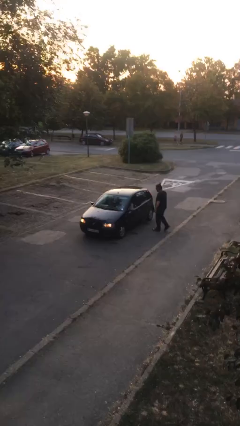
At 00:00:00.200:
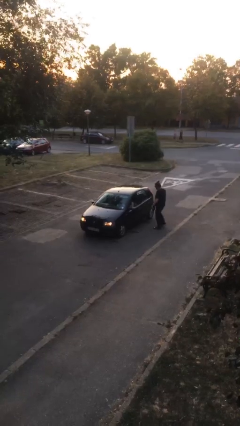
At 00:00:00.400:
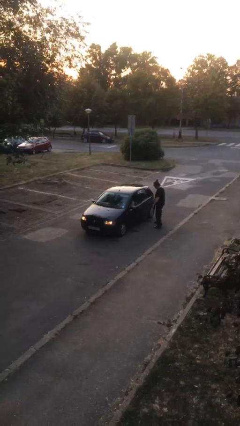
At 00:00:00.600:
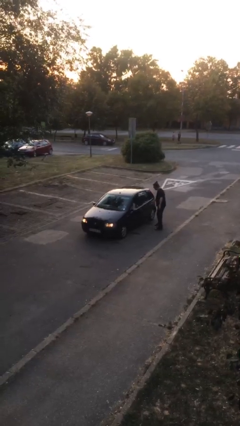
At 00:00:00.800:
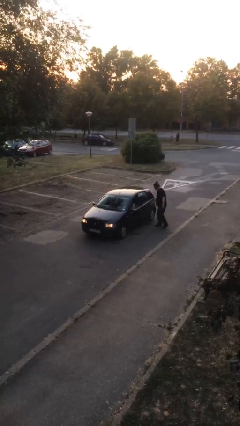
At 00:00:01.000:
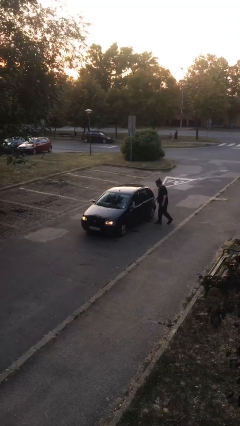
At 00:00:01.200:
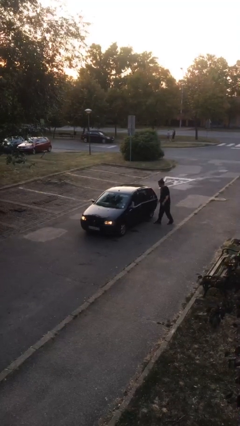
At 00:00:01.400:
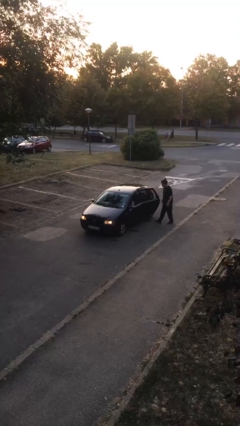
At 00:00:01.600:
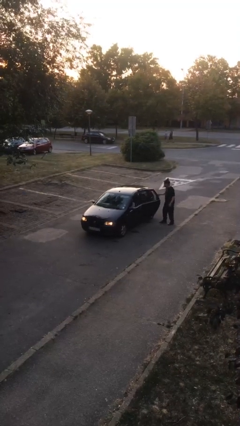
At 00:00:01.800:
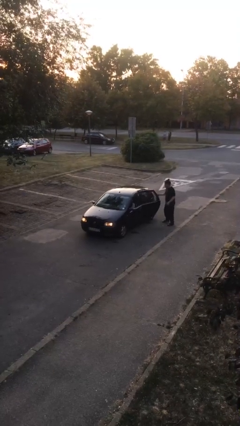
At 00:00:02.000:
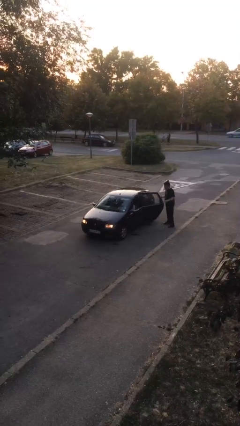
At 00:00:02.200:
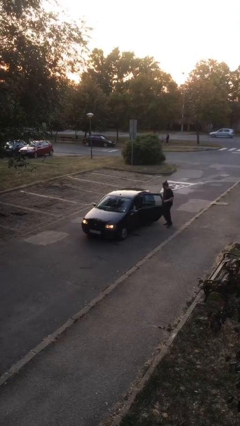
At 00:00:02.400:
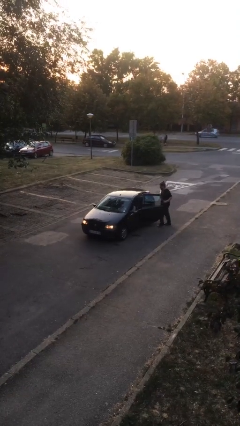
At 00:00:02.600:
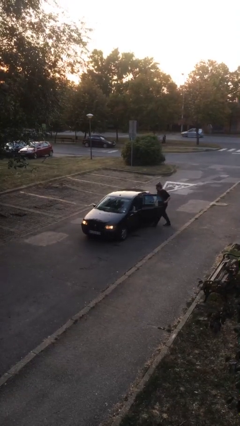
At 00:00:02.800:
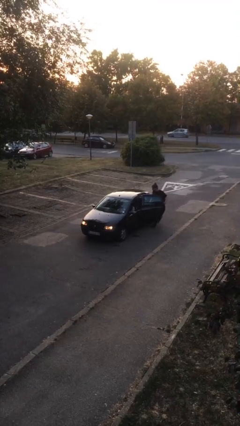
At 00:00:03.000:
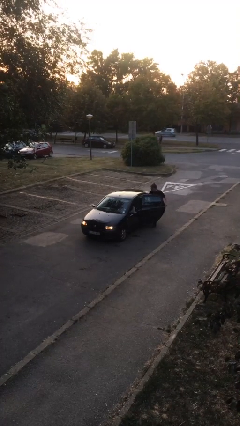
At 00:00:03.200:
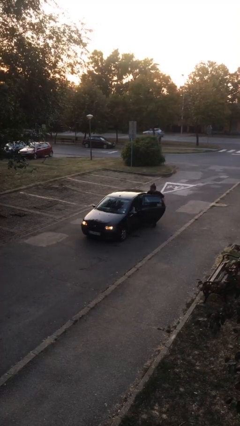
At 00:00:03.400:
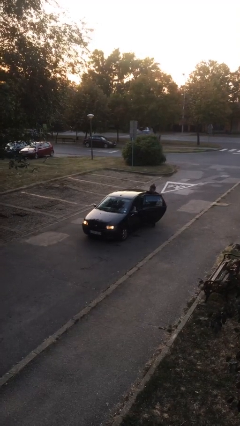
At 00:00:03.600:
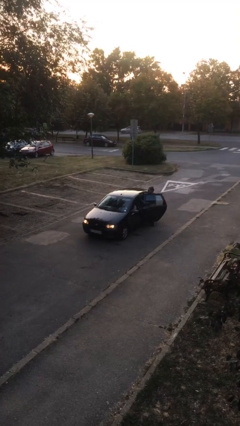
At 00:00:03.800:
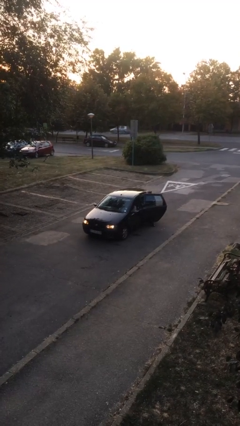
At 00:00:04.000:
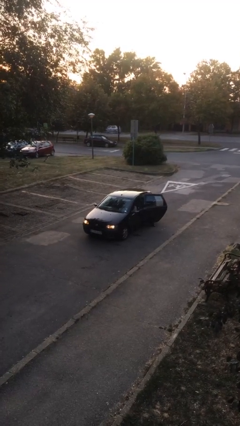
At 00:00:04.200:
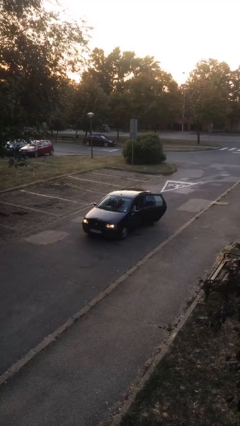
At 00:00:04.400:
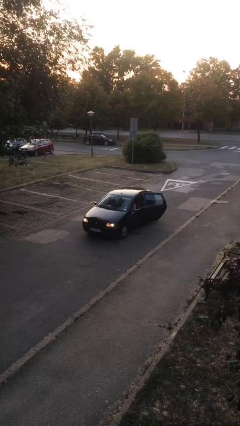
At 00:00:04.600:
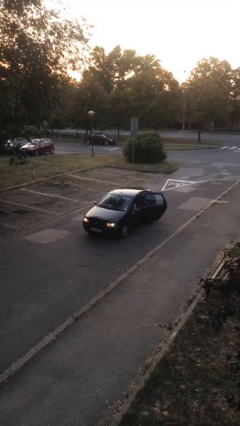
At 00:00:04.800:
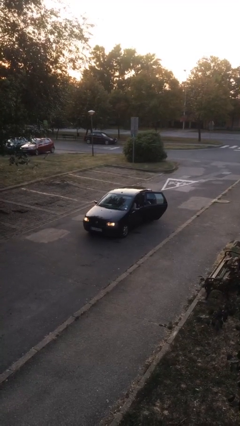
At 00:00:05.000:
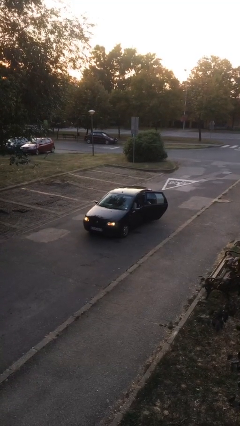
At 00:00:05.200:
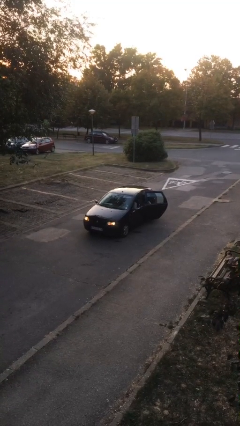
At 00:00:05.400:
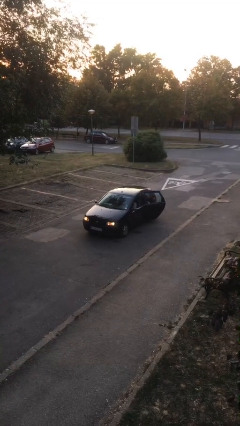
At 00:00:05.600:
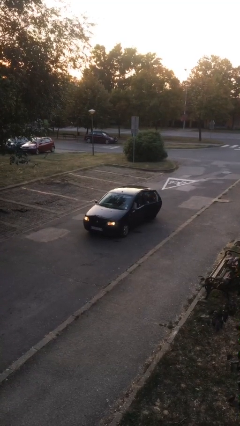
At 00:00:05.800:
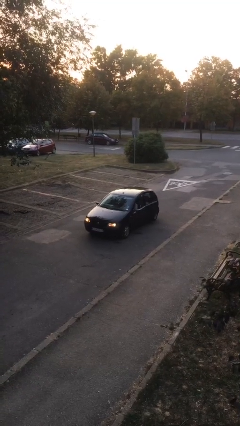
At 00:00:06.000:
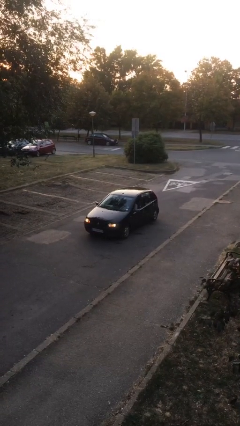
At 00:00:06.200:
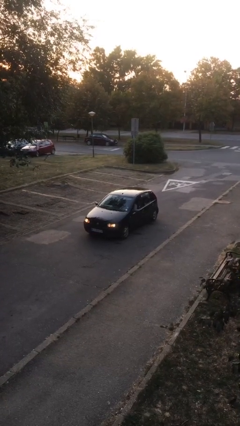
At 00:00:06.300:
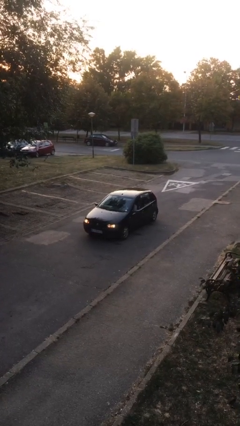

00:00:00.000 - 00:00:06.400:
car picks up person

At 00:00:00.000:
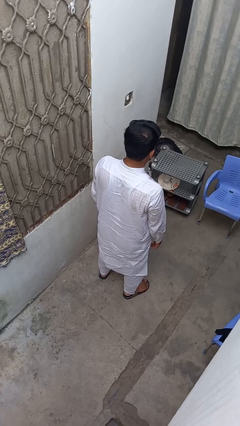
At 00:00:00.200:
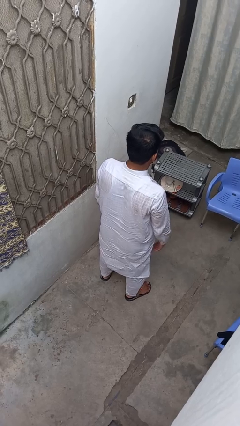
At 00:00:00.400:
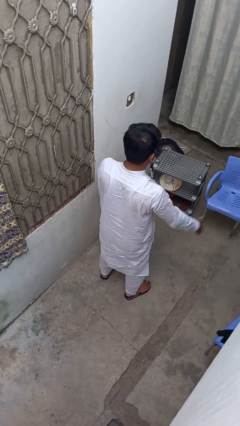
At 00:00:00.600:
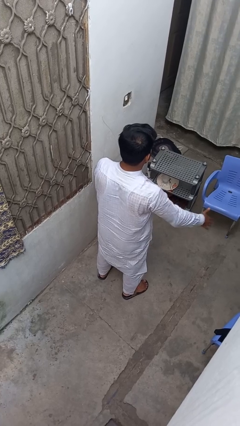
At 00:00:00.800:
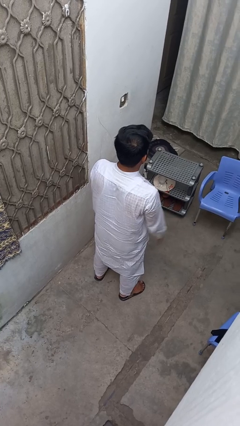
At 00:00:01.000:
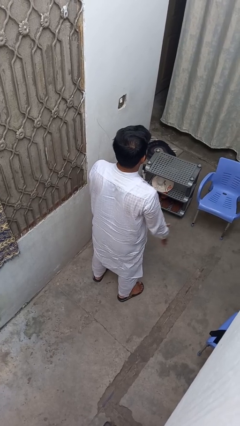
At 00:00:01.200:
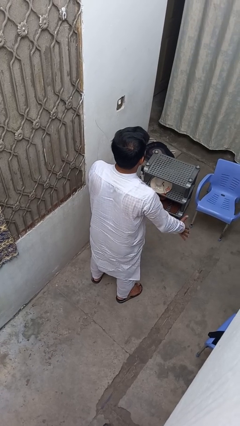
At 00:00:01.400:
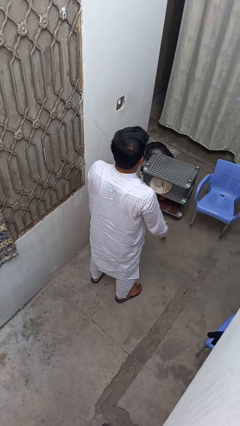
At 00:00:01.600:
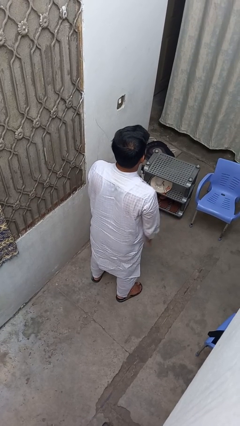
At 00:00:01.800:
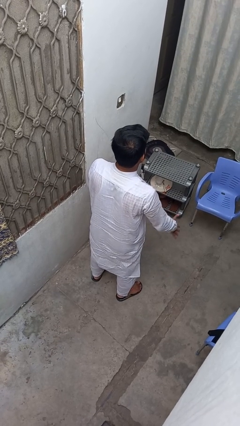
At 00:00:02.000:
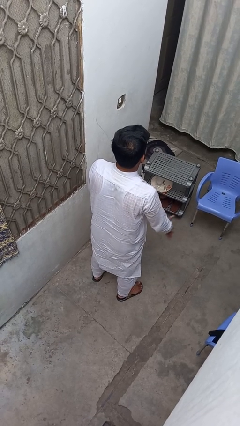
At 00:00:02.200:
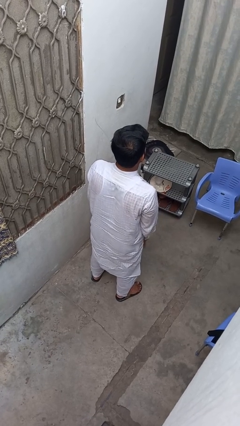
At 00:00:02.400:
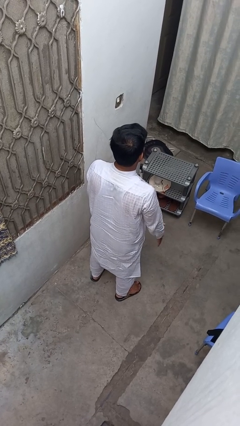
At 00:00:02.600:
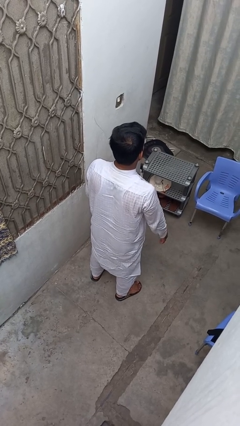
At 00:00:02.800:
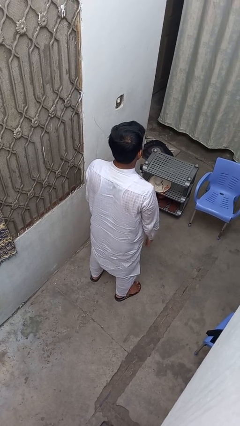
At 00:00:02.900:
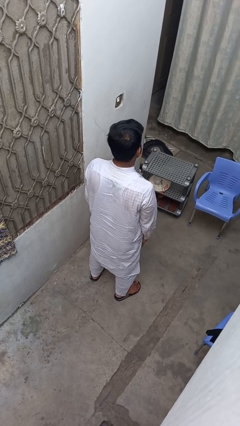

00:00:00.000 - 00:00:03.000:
person slaps hands on thighs

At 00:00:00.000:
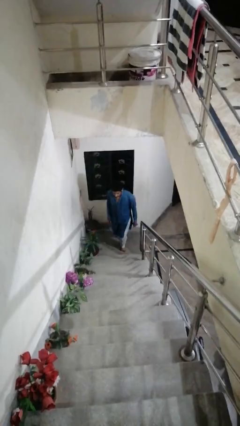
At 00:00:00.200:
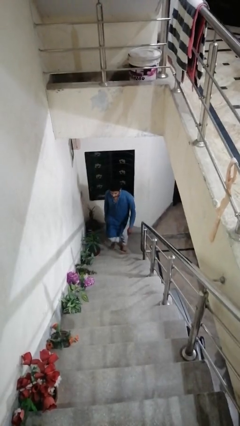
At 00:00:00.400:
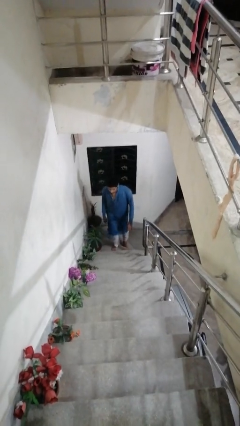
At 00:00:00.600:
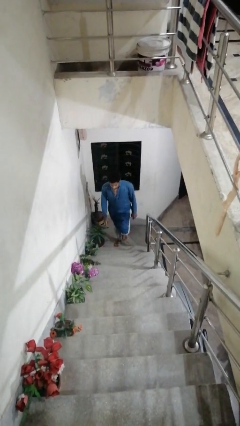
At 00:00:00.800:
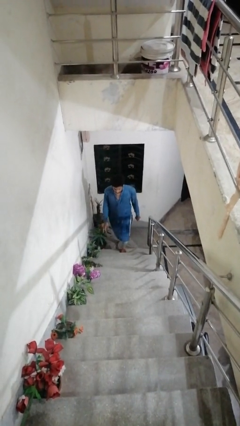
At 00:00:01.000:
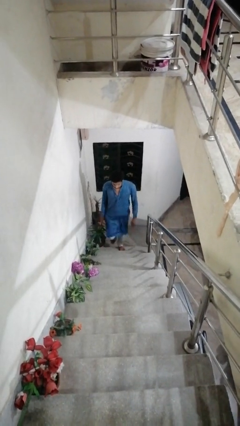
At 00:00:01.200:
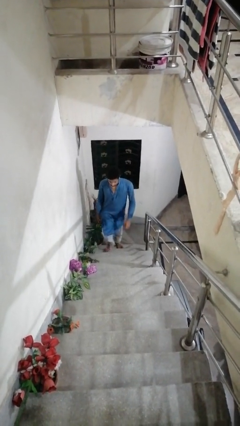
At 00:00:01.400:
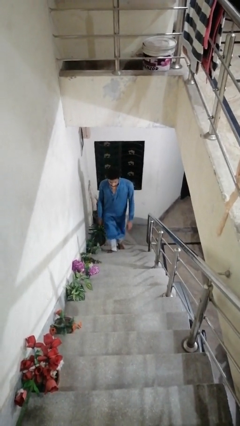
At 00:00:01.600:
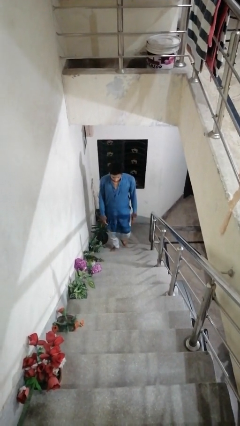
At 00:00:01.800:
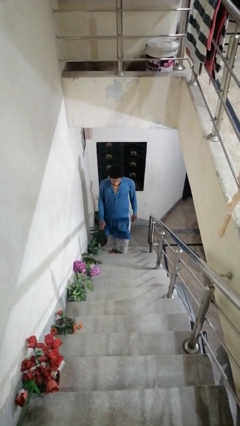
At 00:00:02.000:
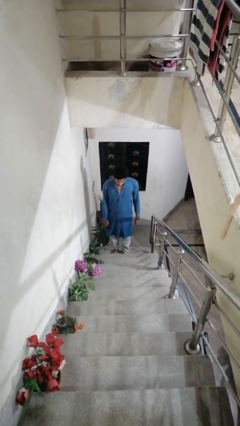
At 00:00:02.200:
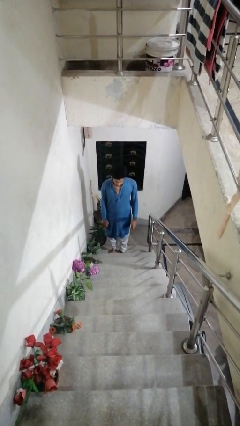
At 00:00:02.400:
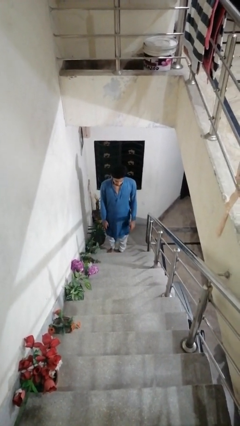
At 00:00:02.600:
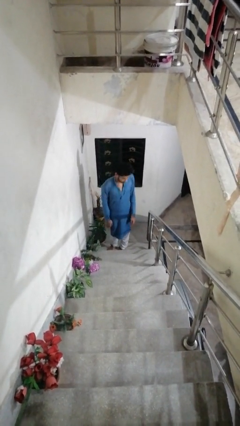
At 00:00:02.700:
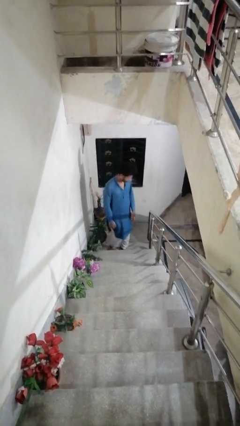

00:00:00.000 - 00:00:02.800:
person climbs up stairs

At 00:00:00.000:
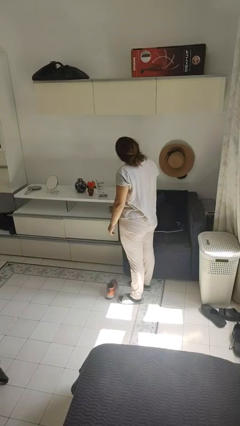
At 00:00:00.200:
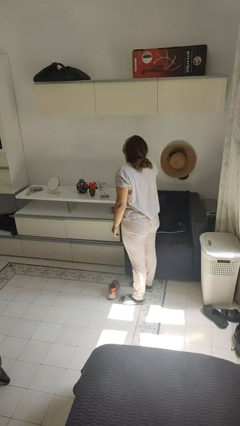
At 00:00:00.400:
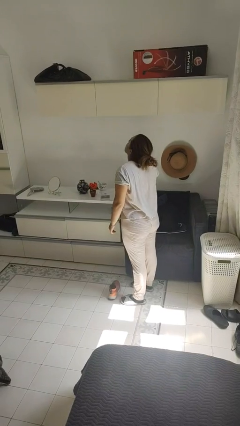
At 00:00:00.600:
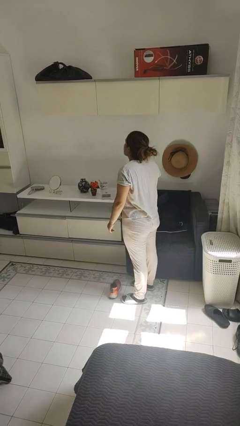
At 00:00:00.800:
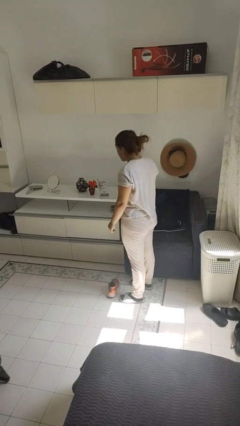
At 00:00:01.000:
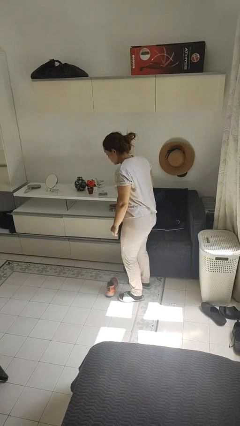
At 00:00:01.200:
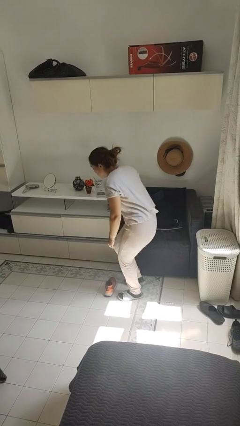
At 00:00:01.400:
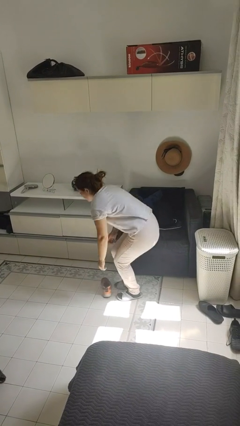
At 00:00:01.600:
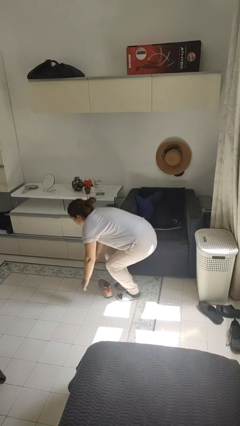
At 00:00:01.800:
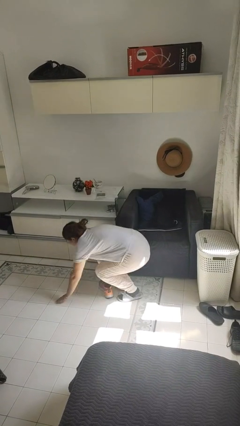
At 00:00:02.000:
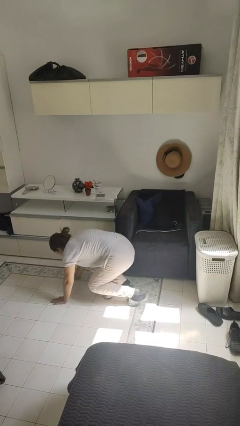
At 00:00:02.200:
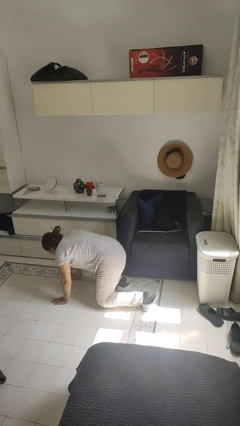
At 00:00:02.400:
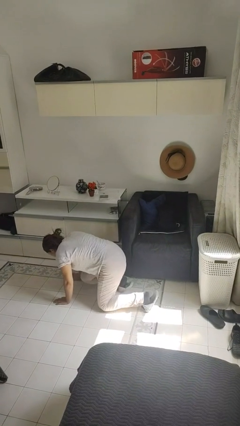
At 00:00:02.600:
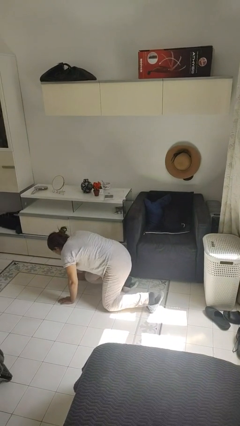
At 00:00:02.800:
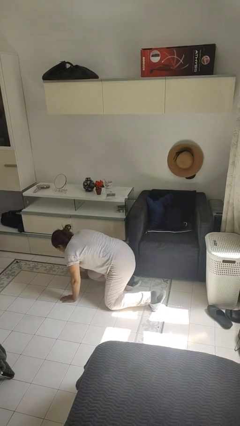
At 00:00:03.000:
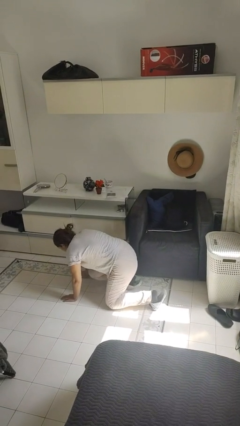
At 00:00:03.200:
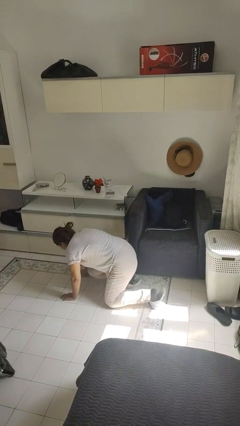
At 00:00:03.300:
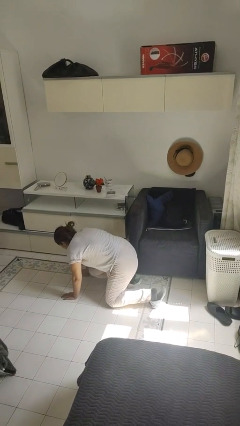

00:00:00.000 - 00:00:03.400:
person trips on object on floor

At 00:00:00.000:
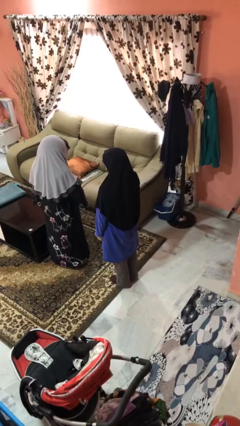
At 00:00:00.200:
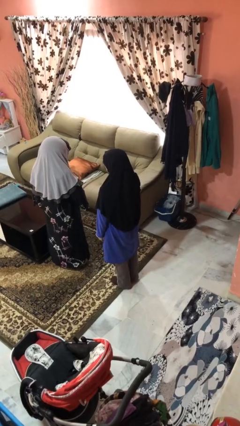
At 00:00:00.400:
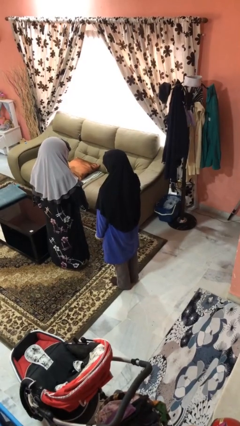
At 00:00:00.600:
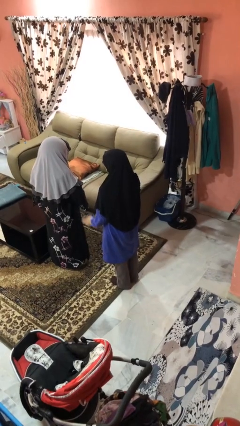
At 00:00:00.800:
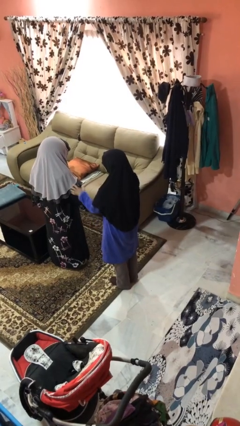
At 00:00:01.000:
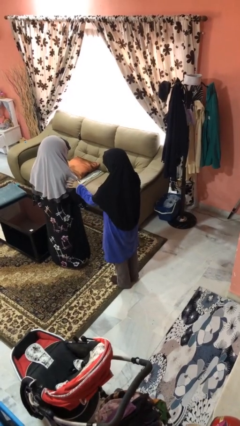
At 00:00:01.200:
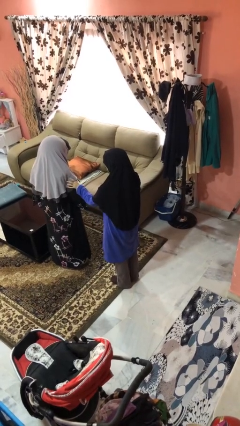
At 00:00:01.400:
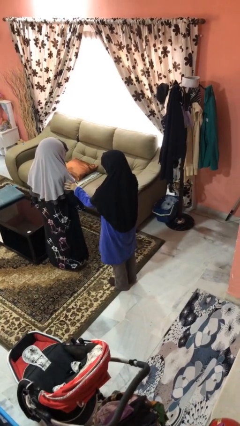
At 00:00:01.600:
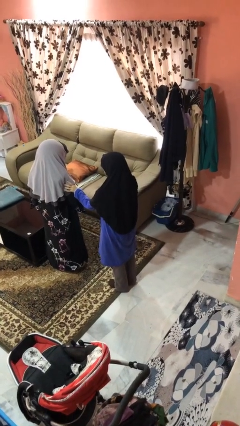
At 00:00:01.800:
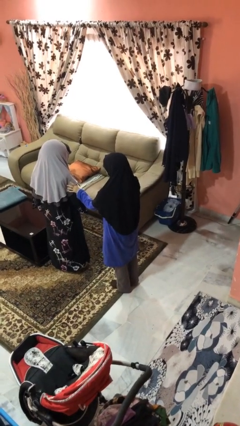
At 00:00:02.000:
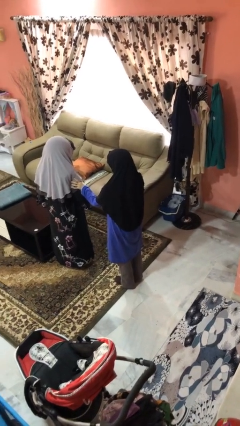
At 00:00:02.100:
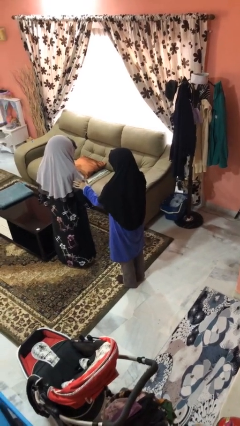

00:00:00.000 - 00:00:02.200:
person grabs person by bicep
